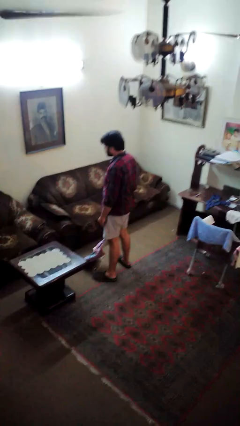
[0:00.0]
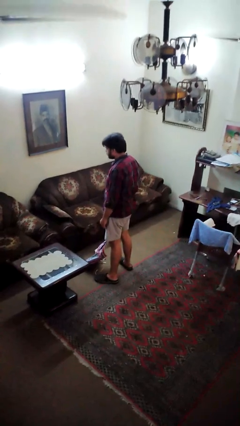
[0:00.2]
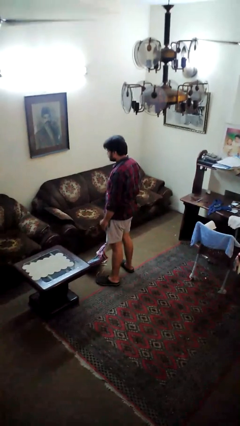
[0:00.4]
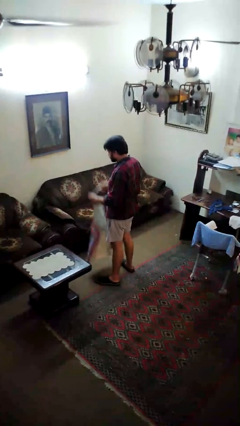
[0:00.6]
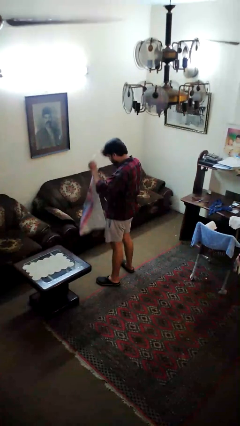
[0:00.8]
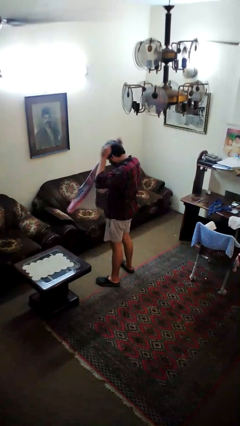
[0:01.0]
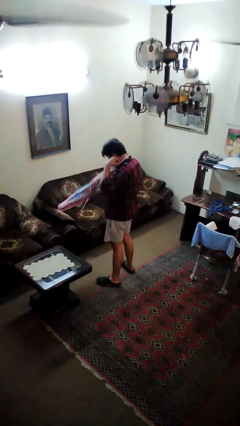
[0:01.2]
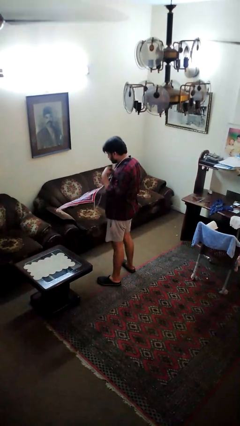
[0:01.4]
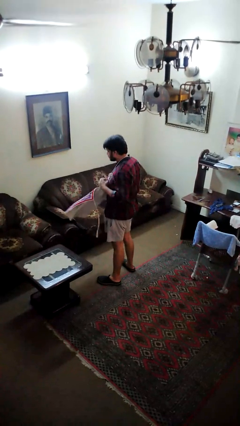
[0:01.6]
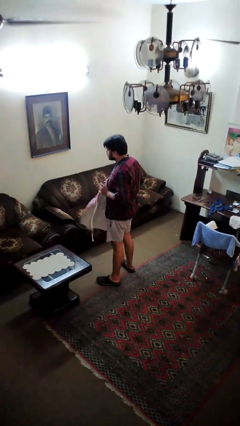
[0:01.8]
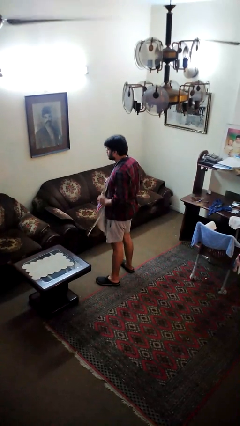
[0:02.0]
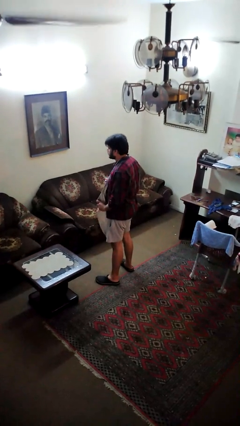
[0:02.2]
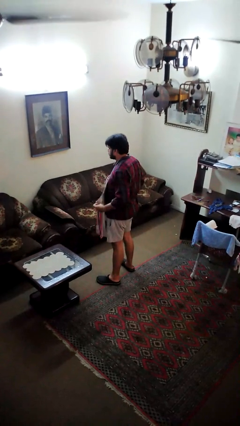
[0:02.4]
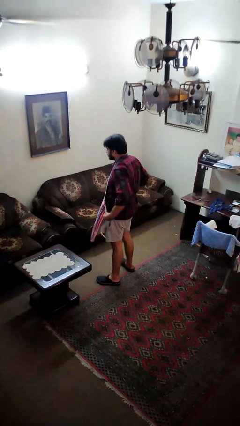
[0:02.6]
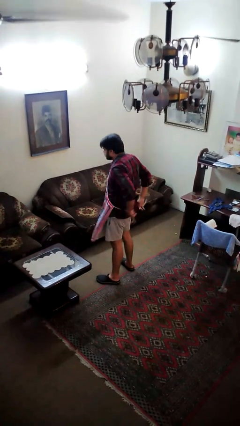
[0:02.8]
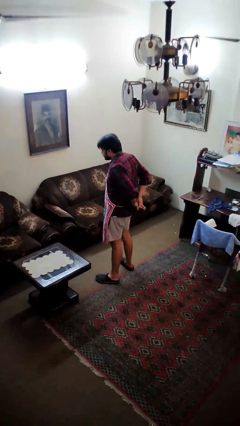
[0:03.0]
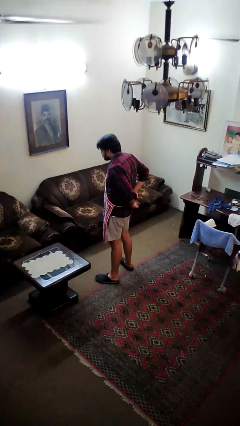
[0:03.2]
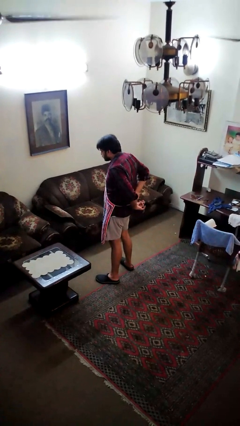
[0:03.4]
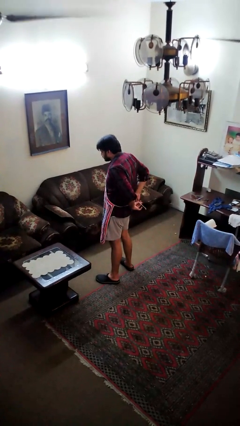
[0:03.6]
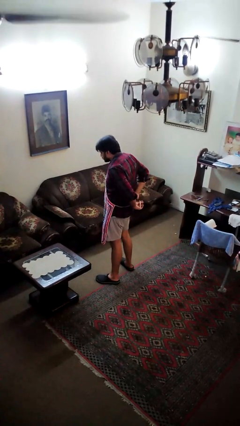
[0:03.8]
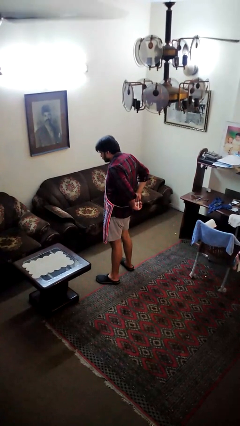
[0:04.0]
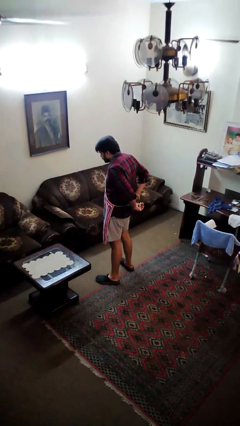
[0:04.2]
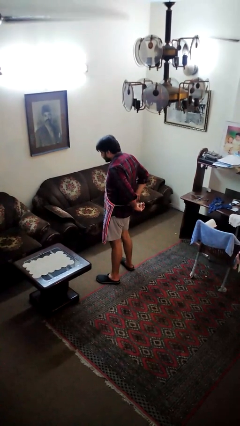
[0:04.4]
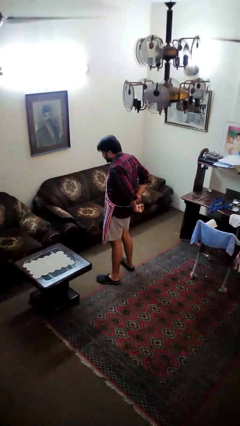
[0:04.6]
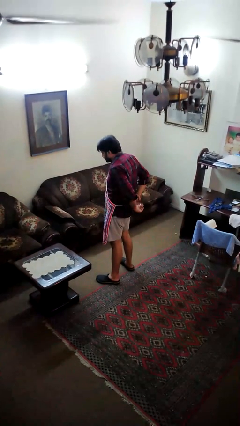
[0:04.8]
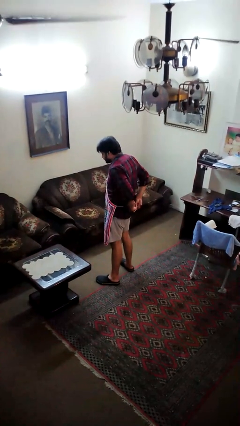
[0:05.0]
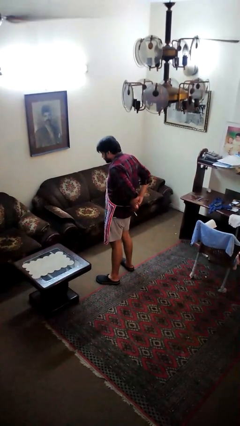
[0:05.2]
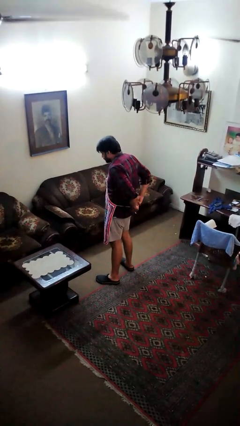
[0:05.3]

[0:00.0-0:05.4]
person puts on apron

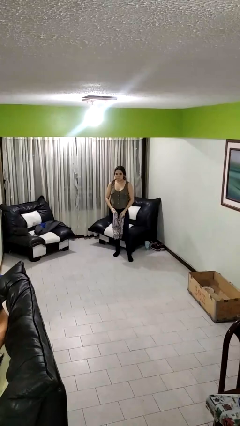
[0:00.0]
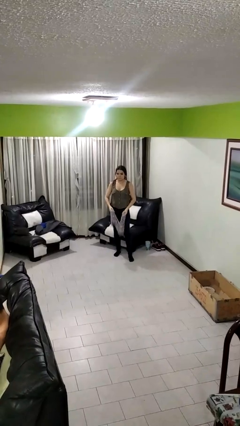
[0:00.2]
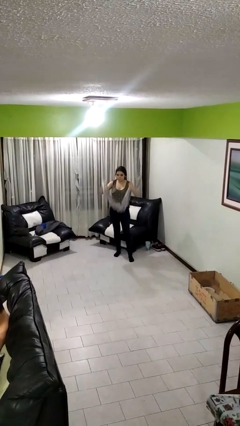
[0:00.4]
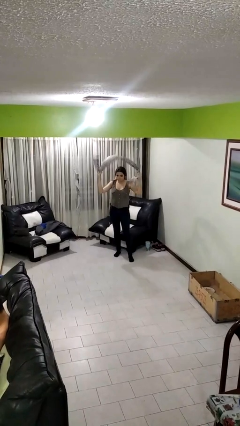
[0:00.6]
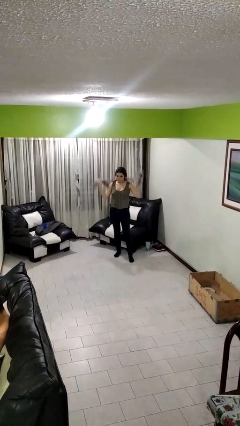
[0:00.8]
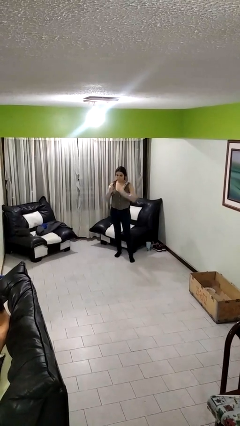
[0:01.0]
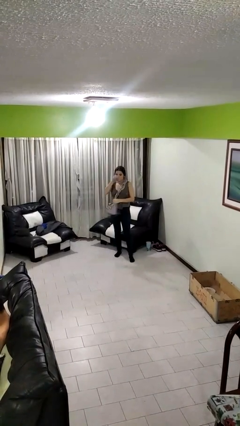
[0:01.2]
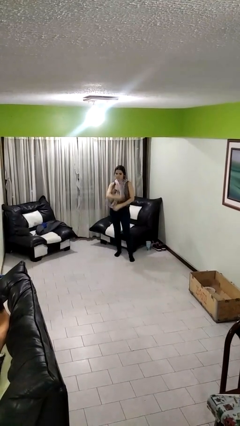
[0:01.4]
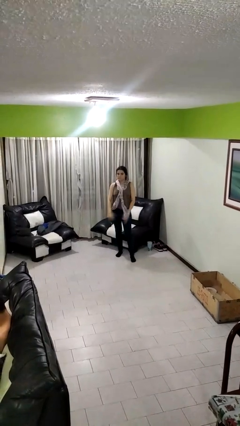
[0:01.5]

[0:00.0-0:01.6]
person puts on scarf

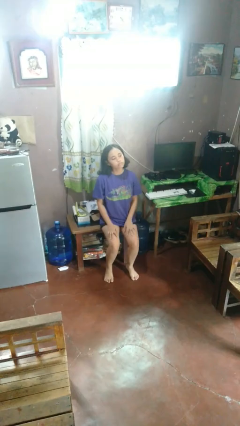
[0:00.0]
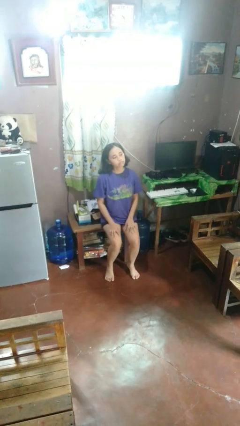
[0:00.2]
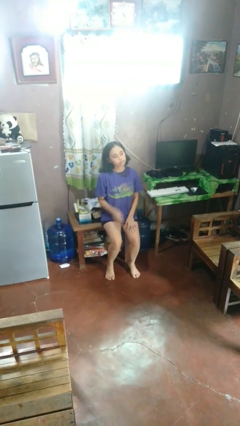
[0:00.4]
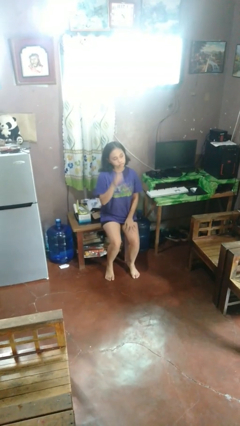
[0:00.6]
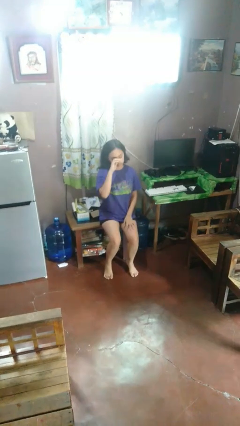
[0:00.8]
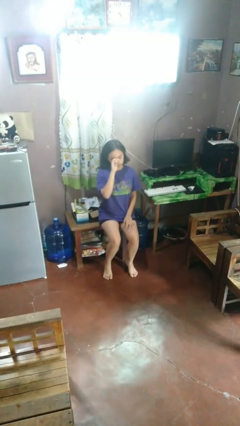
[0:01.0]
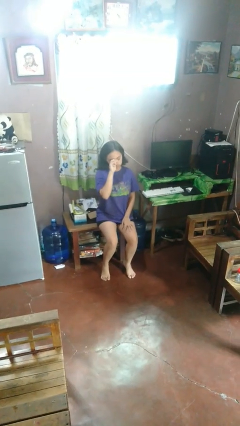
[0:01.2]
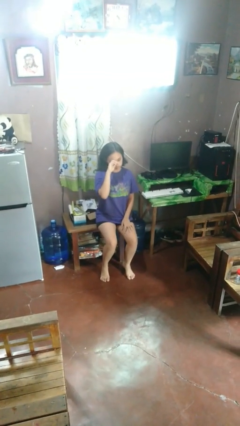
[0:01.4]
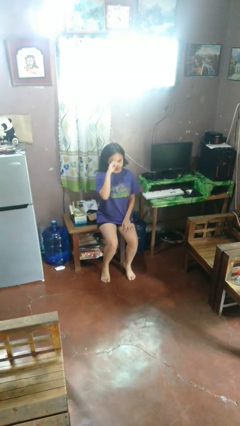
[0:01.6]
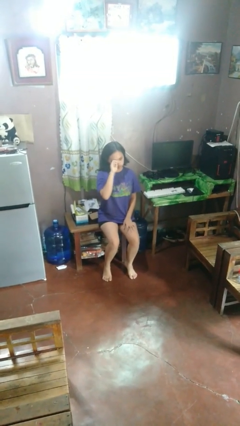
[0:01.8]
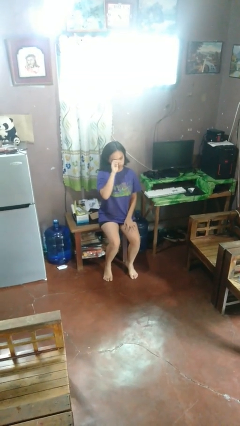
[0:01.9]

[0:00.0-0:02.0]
person rubs eyes

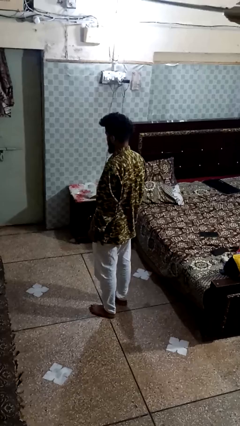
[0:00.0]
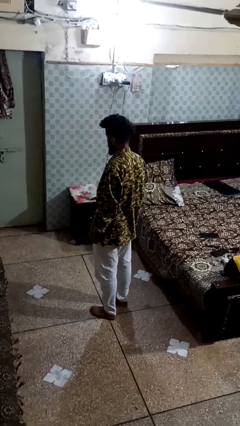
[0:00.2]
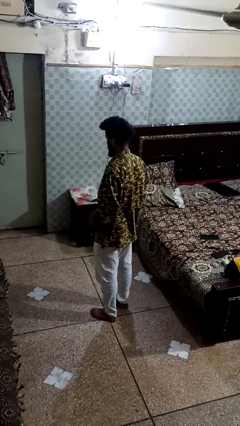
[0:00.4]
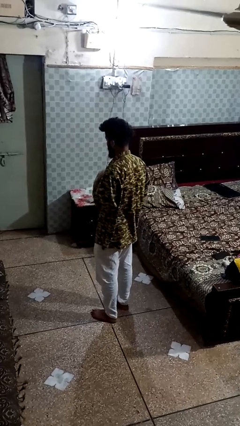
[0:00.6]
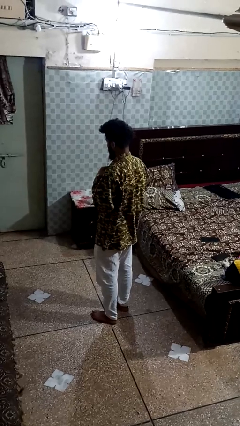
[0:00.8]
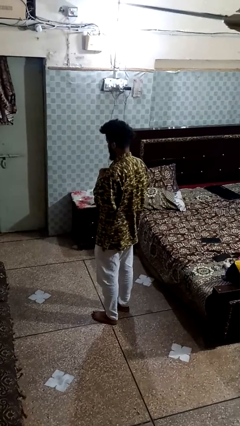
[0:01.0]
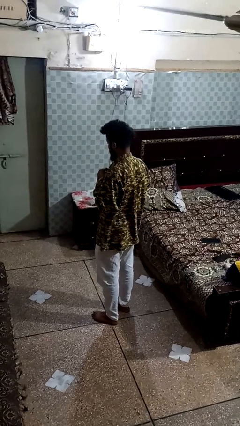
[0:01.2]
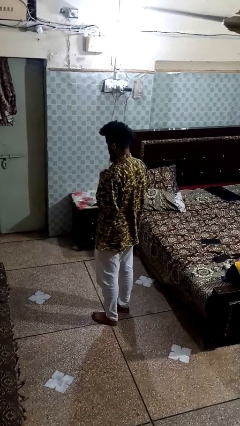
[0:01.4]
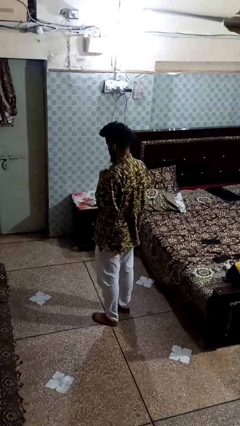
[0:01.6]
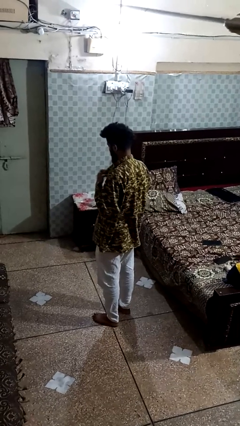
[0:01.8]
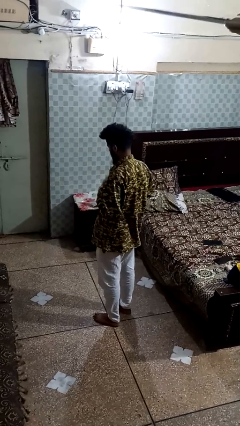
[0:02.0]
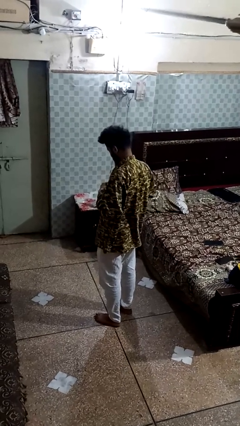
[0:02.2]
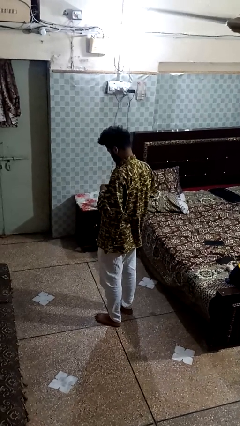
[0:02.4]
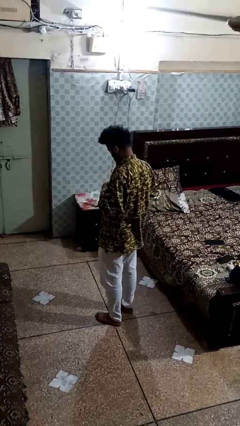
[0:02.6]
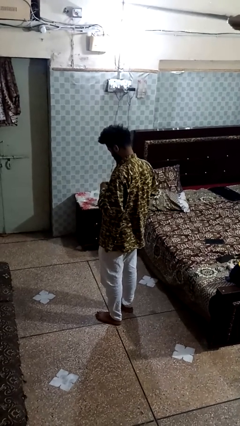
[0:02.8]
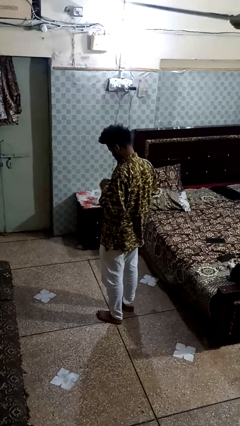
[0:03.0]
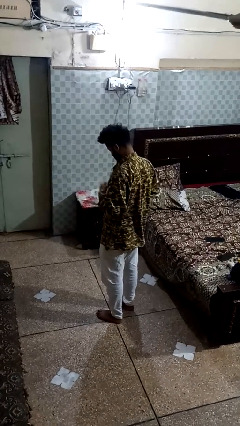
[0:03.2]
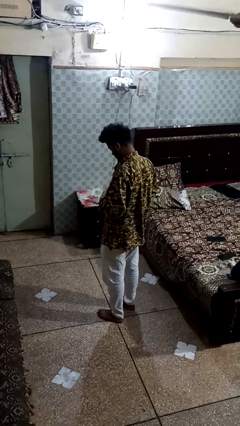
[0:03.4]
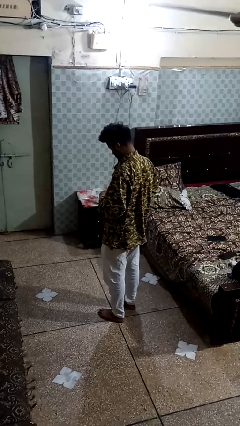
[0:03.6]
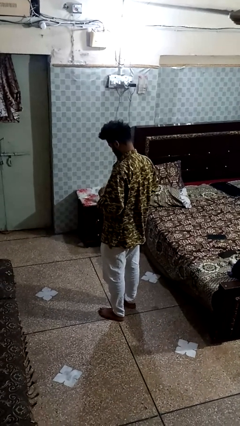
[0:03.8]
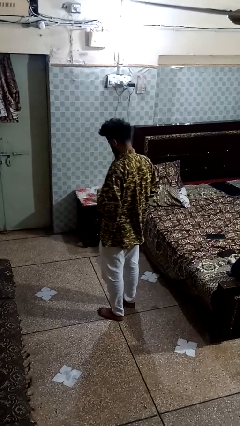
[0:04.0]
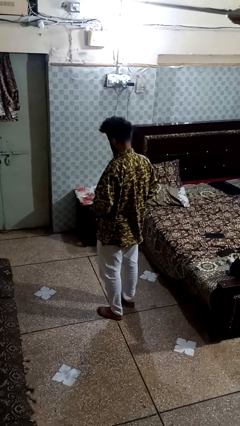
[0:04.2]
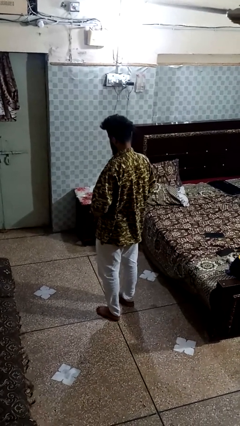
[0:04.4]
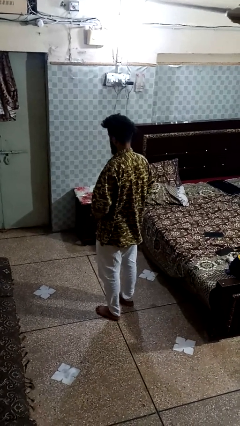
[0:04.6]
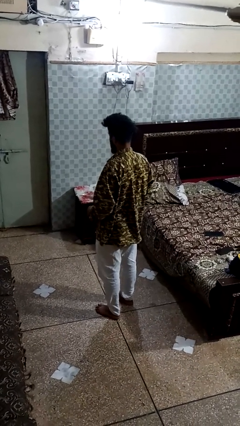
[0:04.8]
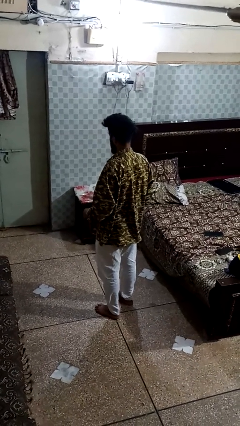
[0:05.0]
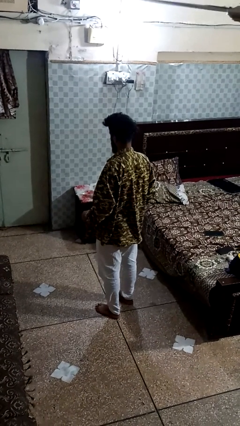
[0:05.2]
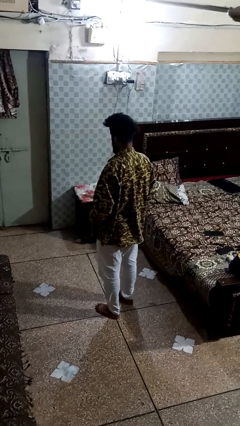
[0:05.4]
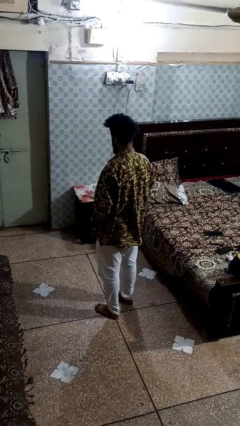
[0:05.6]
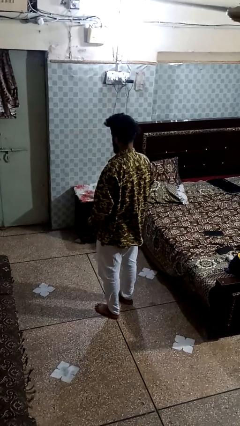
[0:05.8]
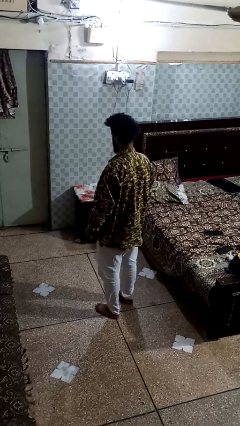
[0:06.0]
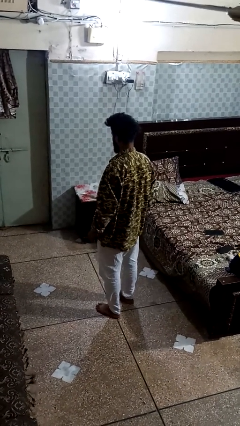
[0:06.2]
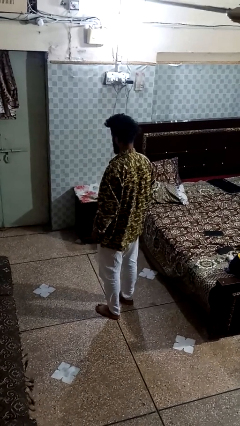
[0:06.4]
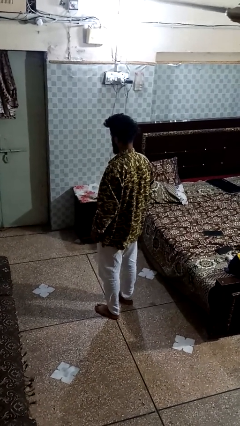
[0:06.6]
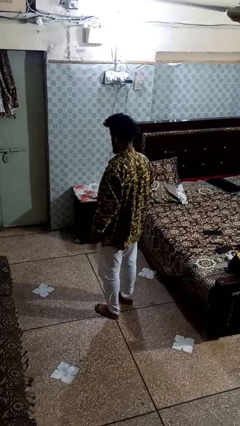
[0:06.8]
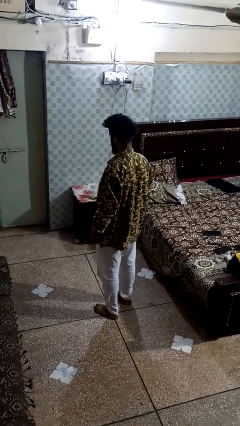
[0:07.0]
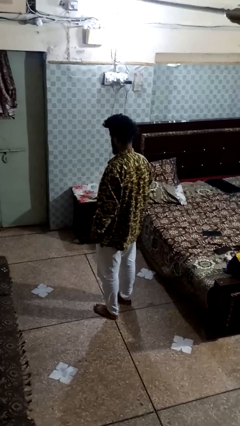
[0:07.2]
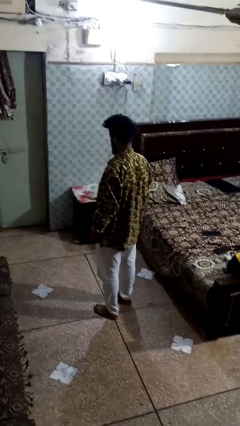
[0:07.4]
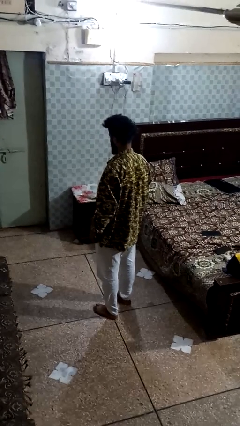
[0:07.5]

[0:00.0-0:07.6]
person unbuttons shirt

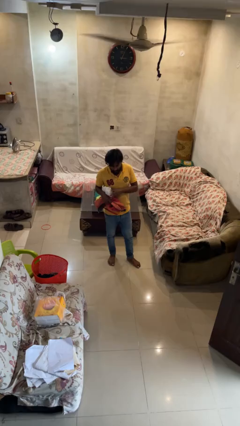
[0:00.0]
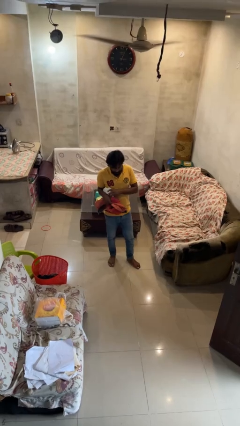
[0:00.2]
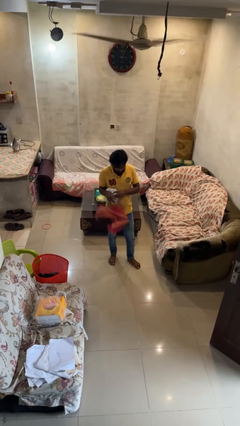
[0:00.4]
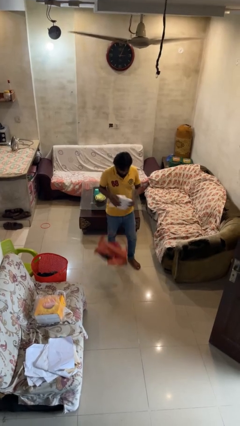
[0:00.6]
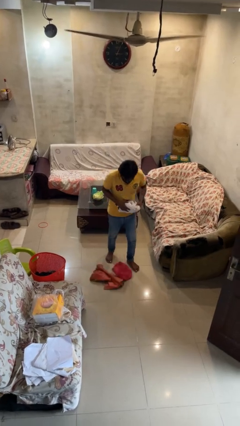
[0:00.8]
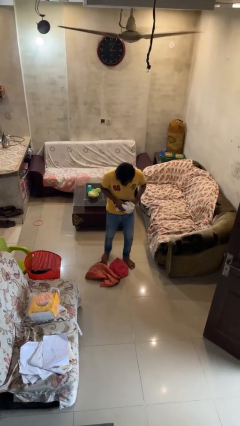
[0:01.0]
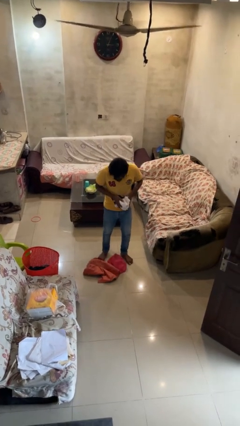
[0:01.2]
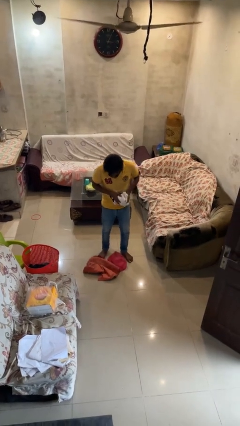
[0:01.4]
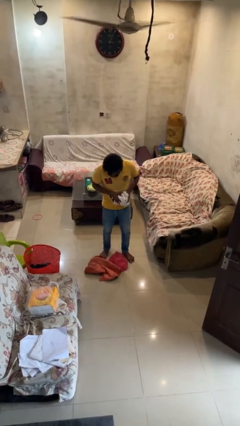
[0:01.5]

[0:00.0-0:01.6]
person drops object
